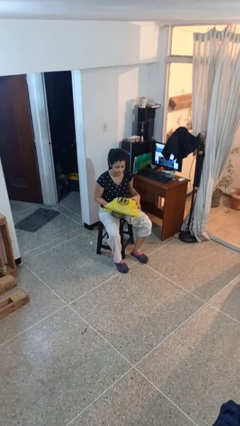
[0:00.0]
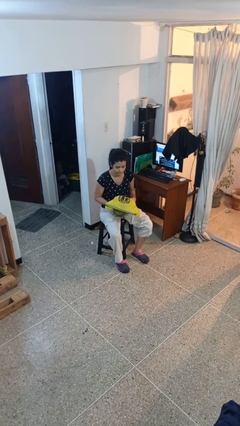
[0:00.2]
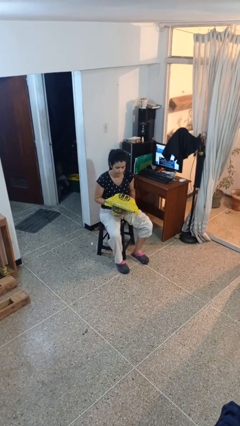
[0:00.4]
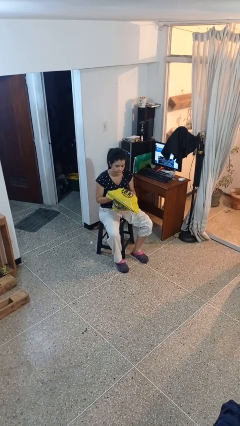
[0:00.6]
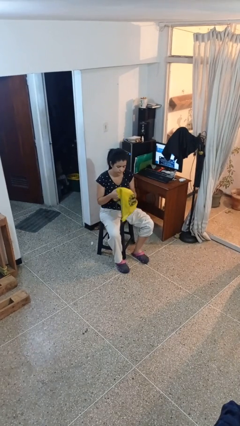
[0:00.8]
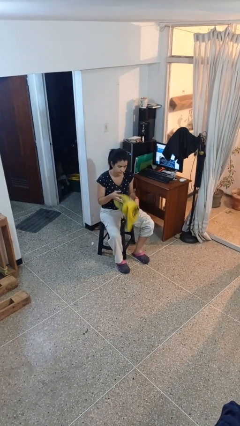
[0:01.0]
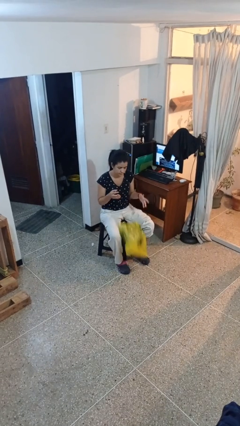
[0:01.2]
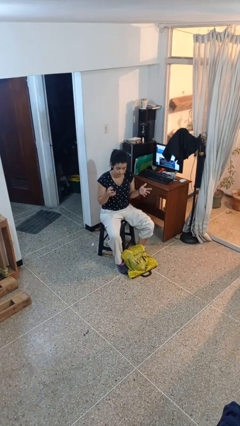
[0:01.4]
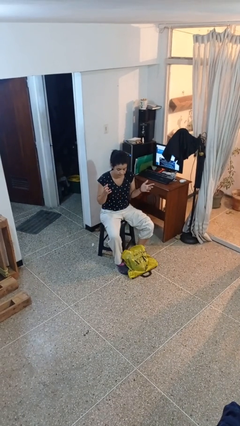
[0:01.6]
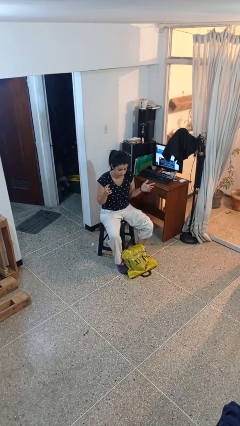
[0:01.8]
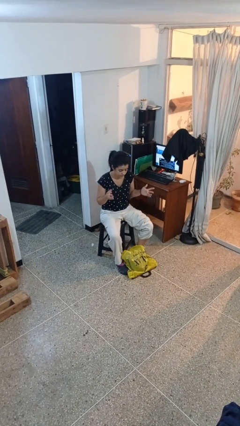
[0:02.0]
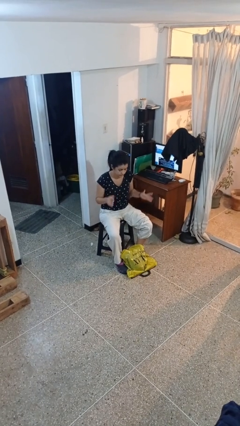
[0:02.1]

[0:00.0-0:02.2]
person drops object

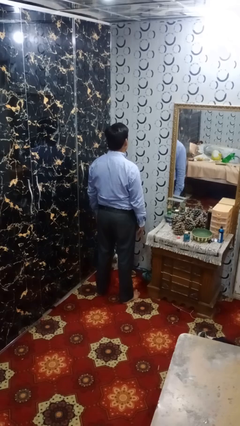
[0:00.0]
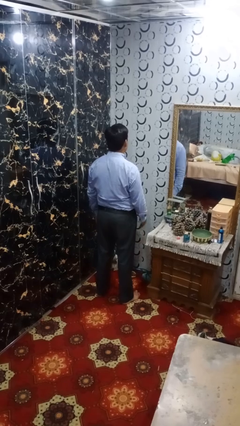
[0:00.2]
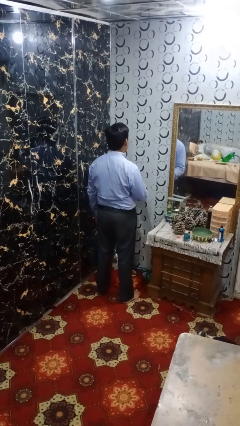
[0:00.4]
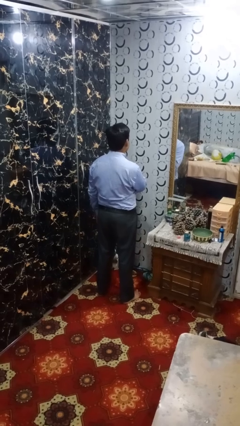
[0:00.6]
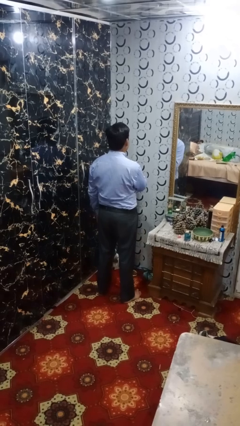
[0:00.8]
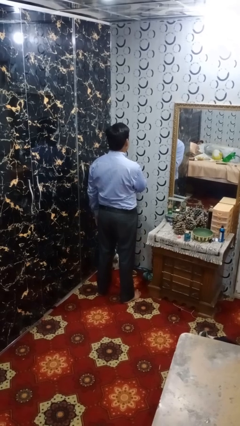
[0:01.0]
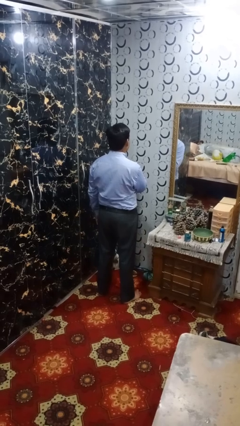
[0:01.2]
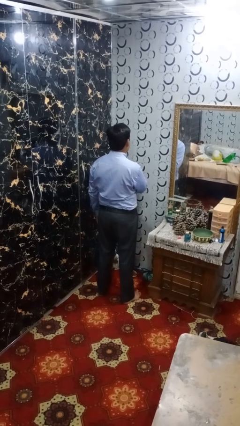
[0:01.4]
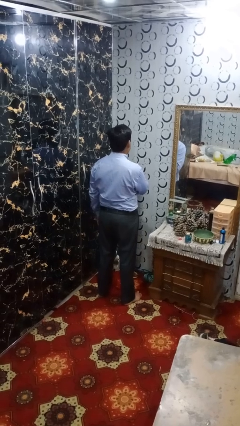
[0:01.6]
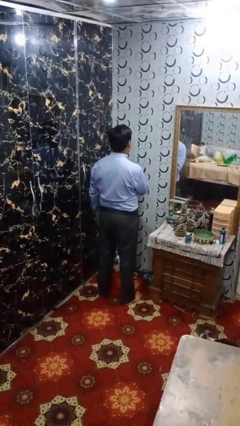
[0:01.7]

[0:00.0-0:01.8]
person drums on chest

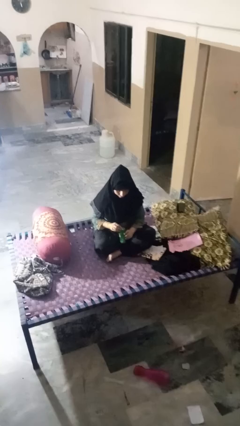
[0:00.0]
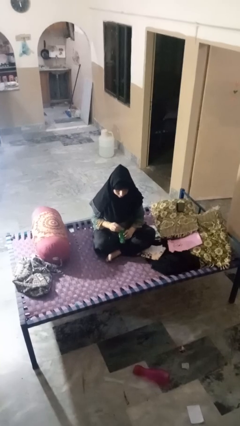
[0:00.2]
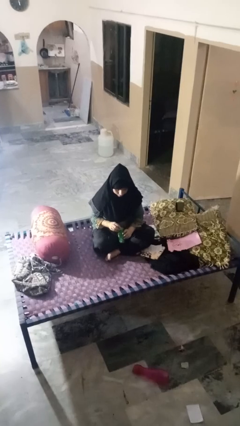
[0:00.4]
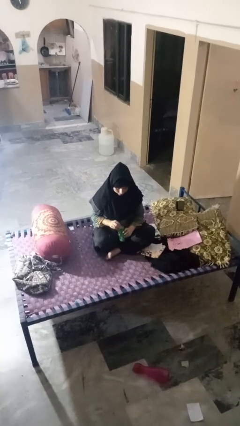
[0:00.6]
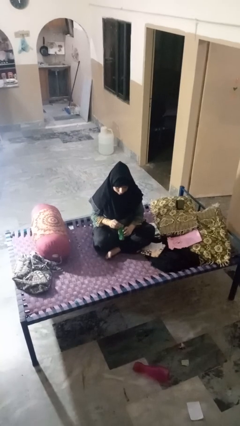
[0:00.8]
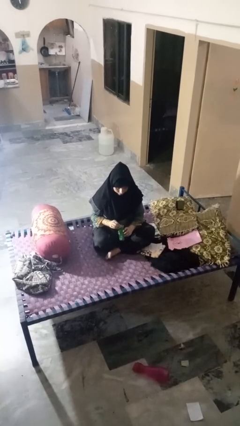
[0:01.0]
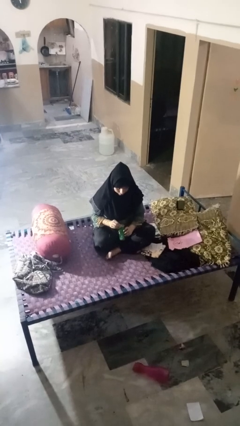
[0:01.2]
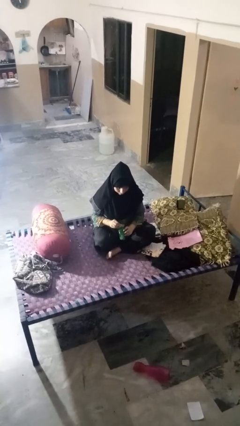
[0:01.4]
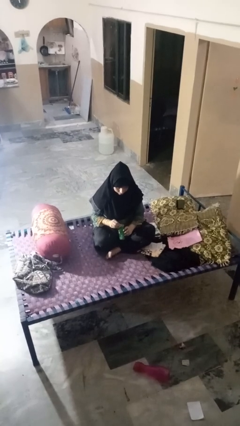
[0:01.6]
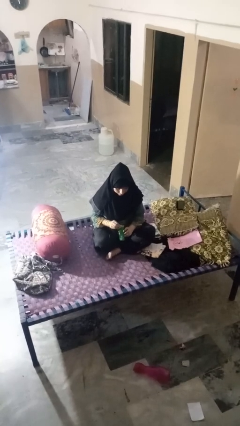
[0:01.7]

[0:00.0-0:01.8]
person opens can with can opener

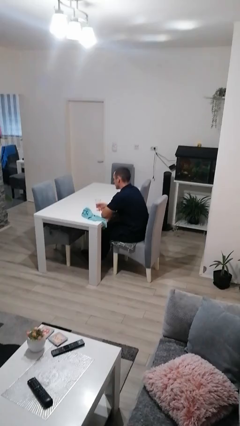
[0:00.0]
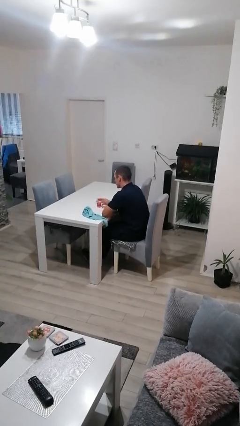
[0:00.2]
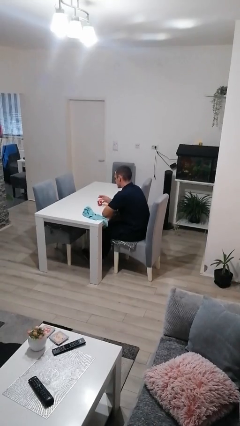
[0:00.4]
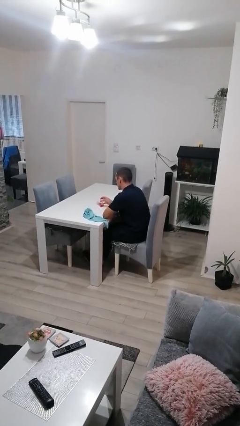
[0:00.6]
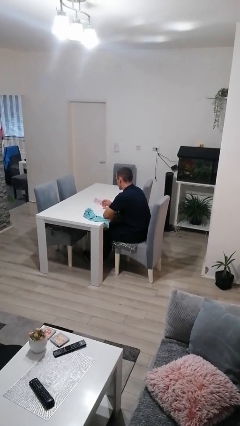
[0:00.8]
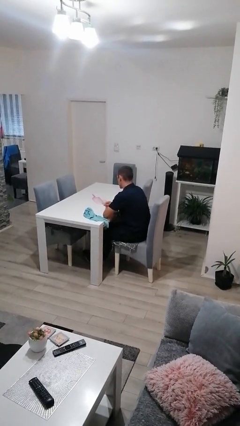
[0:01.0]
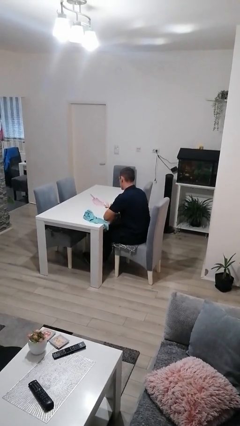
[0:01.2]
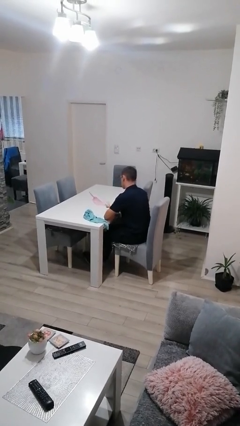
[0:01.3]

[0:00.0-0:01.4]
person spills on table

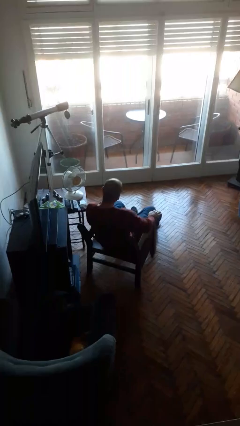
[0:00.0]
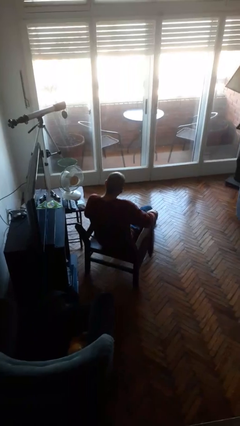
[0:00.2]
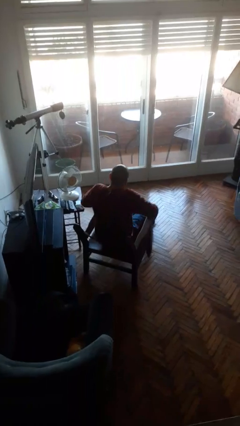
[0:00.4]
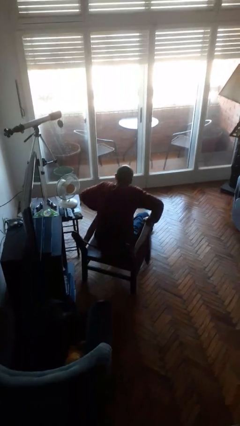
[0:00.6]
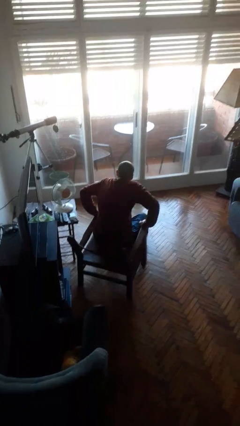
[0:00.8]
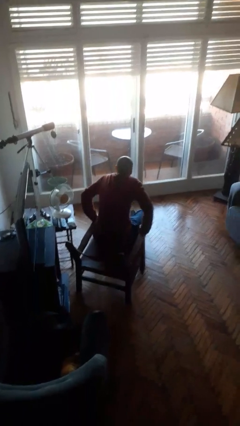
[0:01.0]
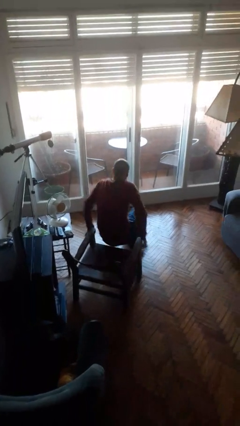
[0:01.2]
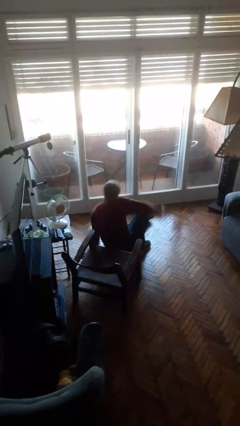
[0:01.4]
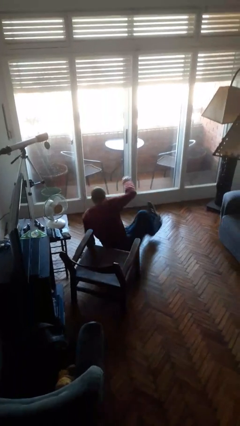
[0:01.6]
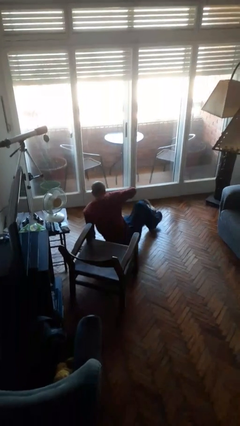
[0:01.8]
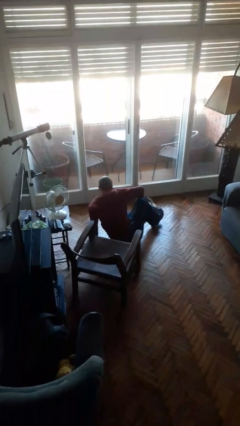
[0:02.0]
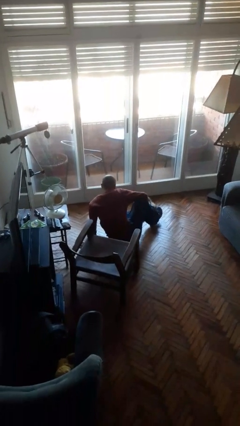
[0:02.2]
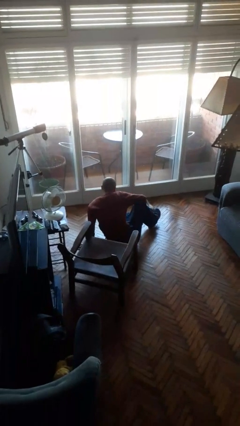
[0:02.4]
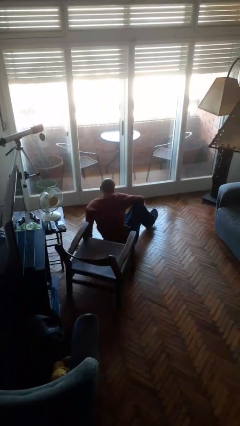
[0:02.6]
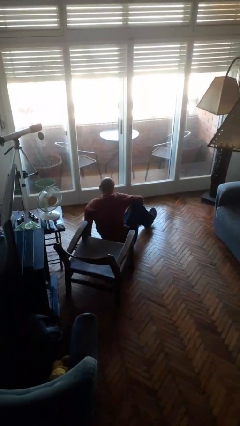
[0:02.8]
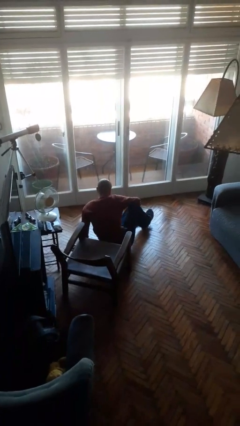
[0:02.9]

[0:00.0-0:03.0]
person falls from chair

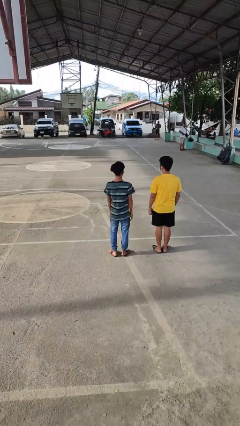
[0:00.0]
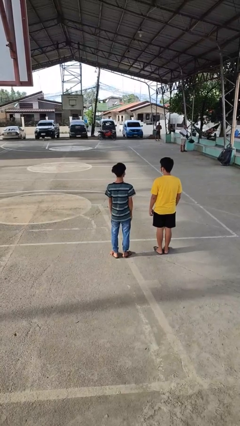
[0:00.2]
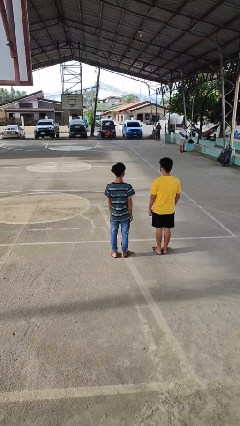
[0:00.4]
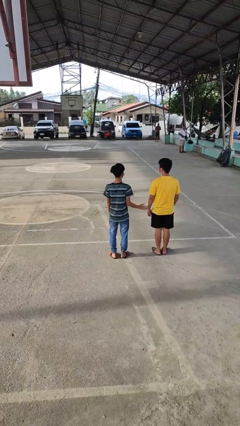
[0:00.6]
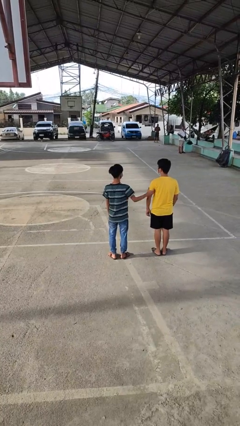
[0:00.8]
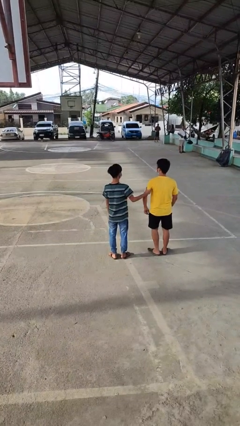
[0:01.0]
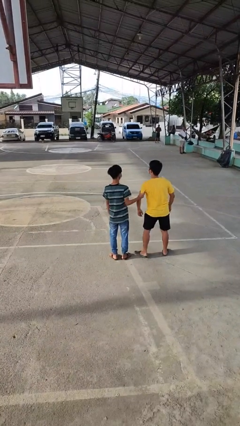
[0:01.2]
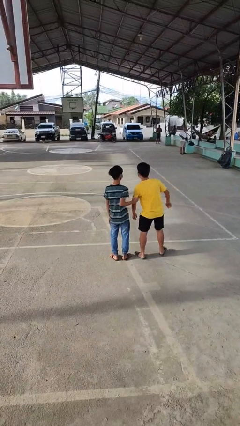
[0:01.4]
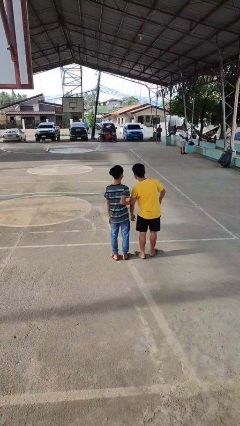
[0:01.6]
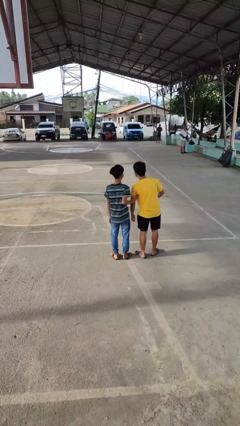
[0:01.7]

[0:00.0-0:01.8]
person grabs person by bicep

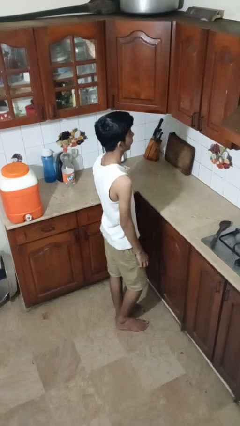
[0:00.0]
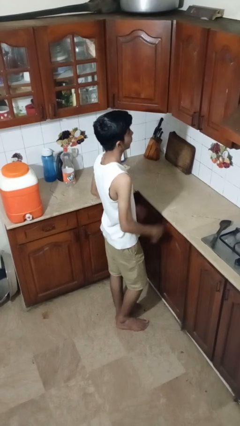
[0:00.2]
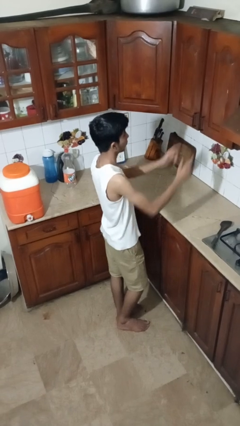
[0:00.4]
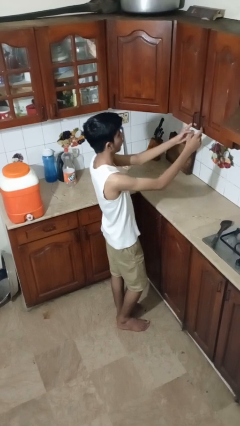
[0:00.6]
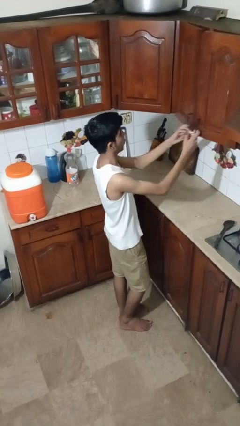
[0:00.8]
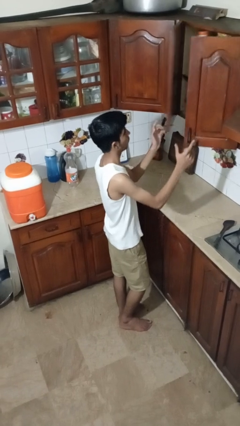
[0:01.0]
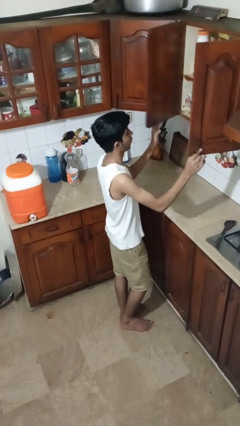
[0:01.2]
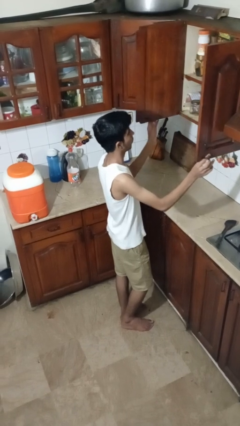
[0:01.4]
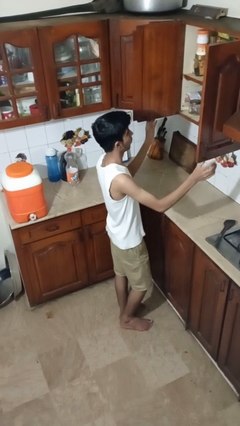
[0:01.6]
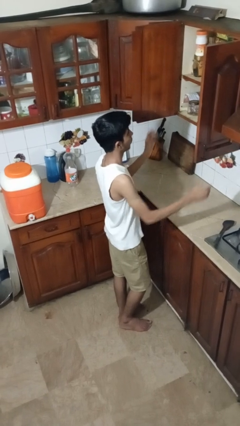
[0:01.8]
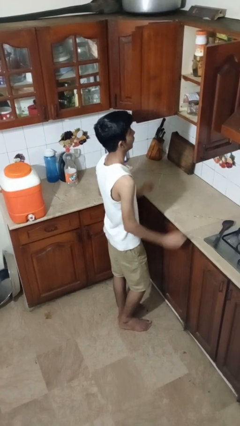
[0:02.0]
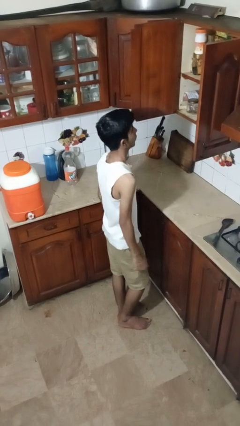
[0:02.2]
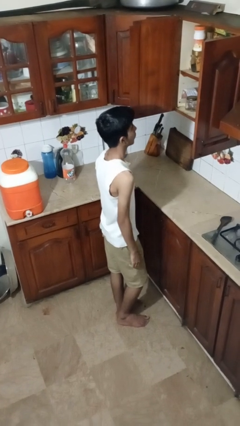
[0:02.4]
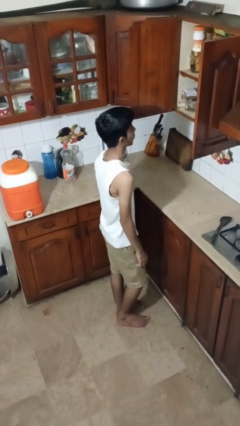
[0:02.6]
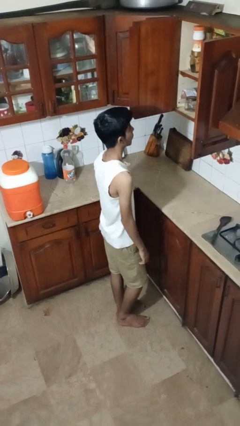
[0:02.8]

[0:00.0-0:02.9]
person opens cabinet

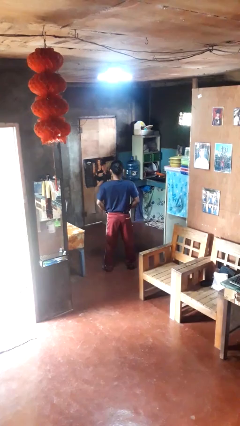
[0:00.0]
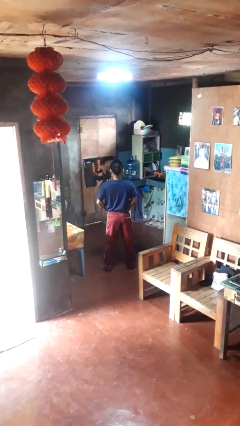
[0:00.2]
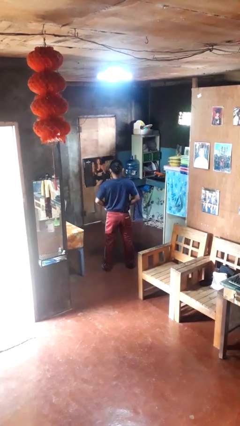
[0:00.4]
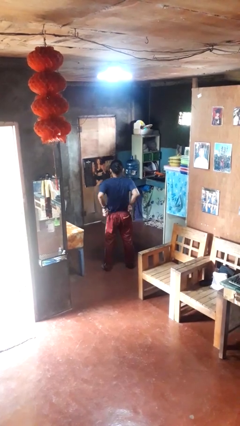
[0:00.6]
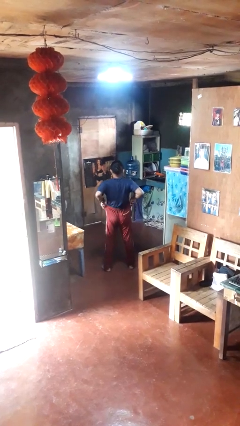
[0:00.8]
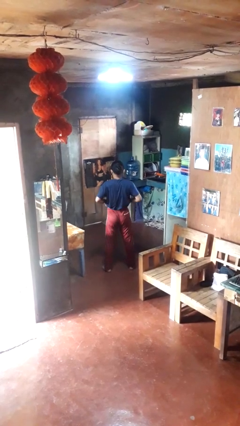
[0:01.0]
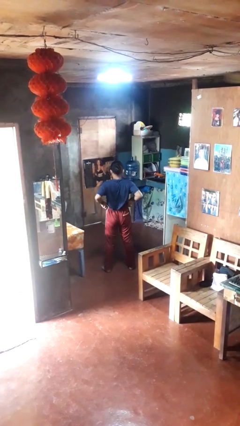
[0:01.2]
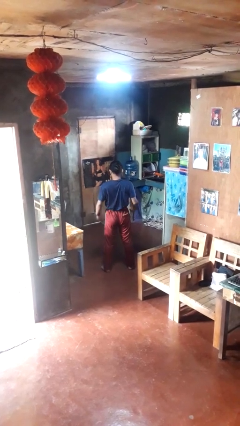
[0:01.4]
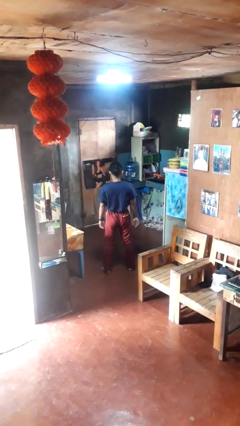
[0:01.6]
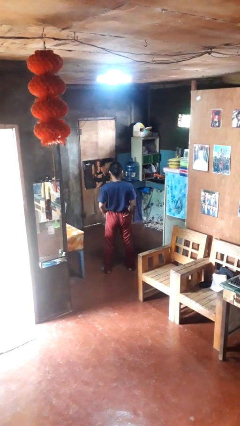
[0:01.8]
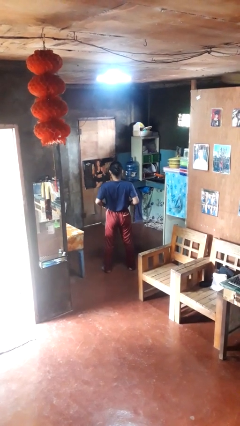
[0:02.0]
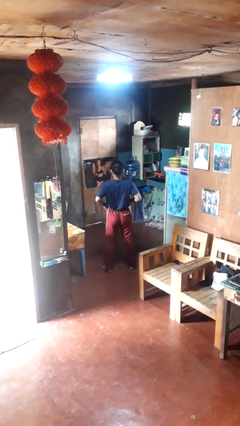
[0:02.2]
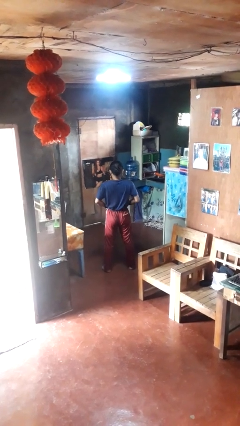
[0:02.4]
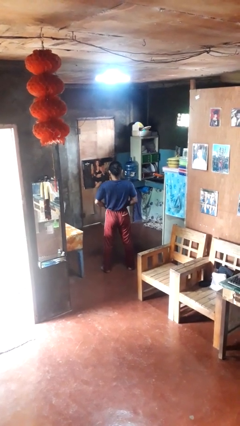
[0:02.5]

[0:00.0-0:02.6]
person hikes up pants
